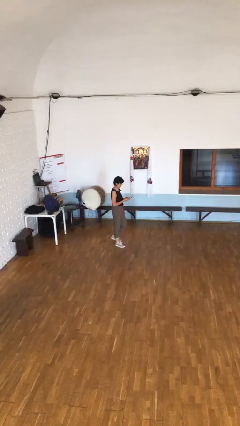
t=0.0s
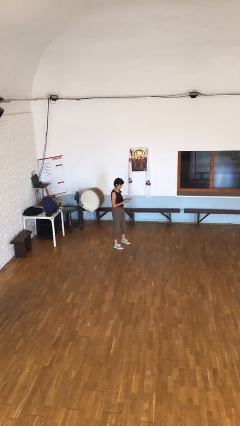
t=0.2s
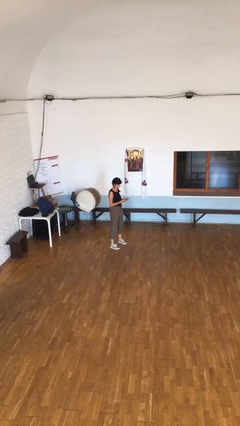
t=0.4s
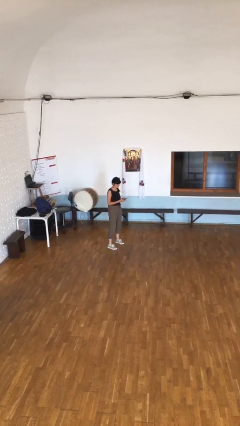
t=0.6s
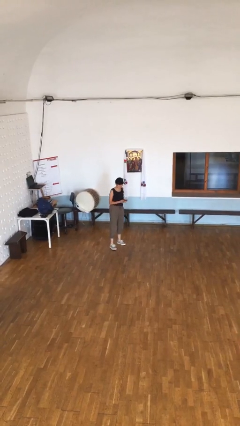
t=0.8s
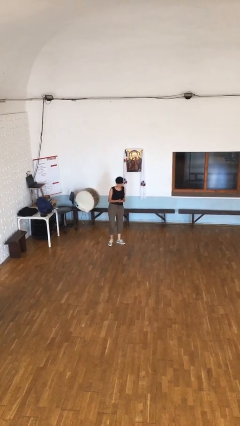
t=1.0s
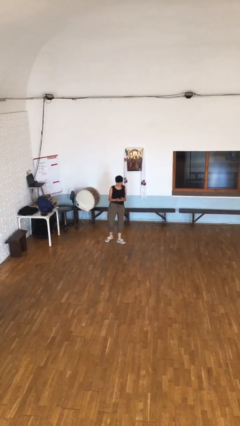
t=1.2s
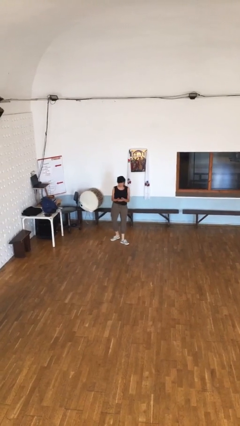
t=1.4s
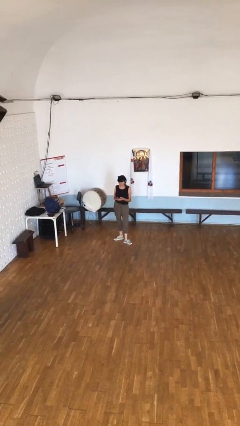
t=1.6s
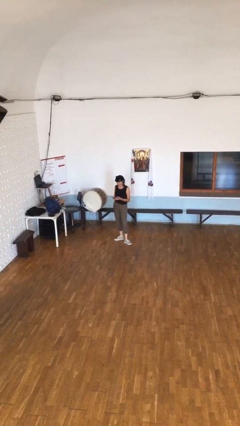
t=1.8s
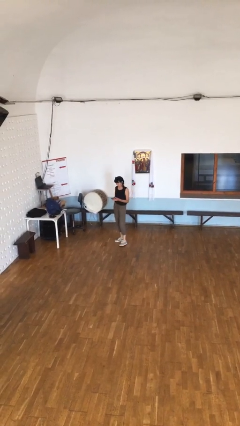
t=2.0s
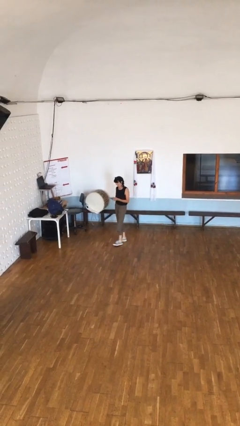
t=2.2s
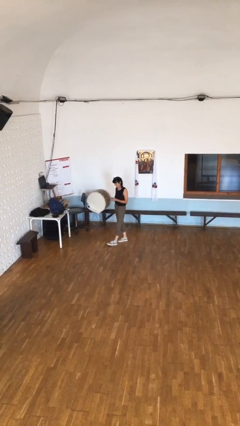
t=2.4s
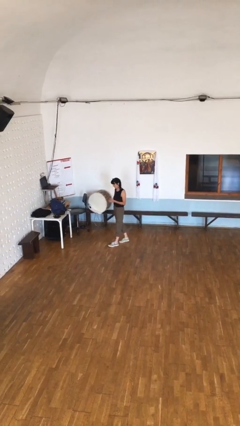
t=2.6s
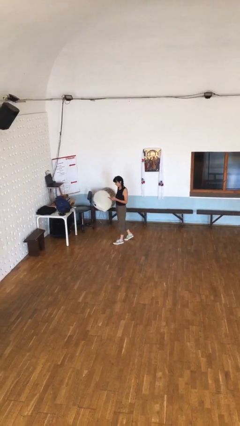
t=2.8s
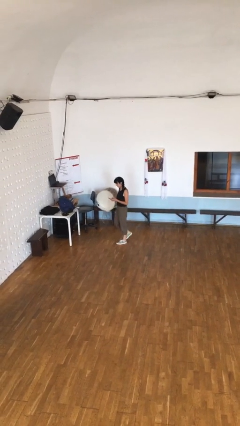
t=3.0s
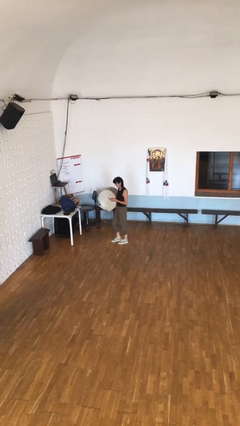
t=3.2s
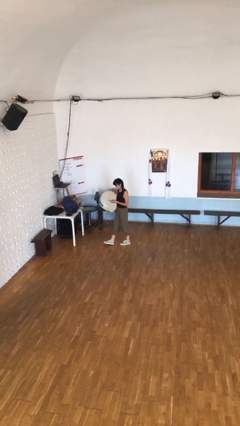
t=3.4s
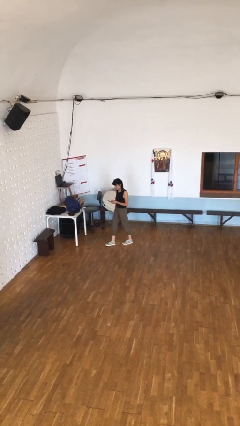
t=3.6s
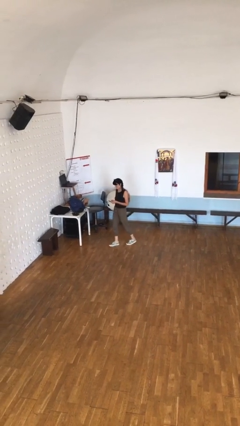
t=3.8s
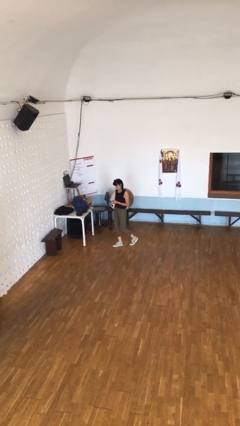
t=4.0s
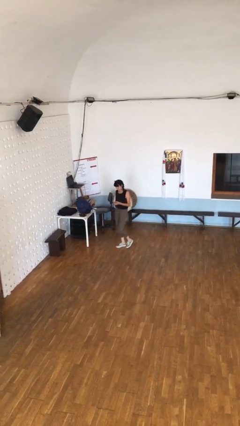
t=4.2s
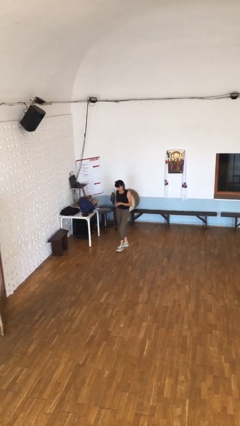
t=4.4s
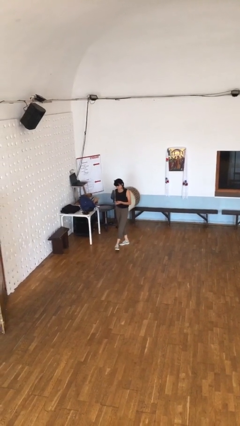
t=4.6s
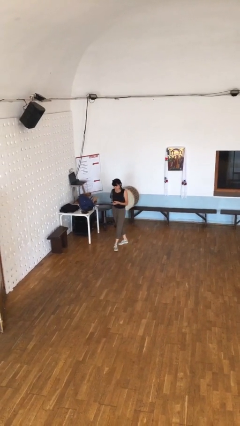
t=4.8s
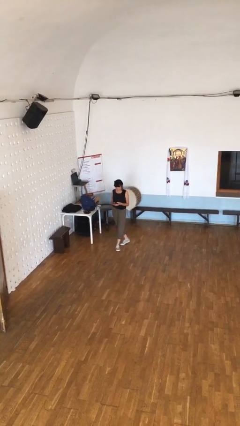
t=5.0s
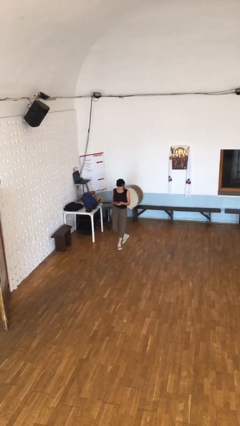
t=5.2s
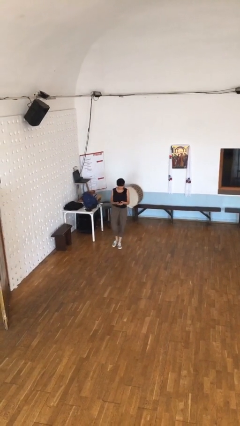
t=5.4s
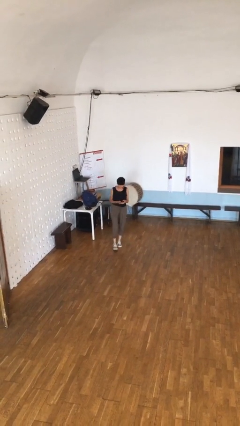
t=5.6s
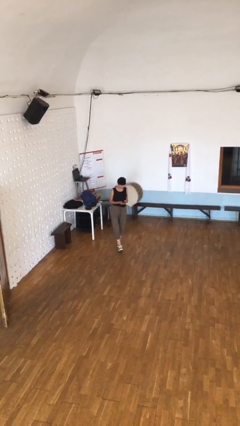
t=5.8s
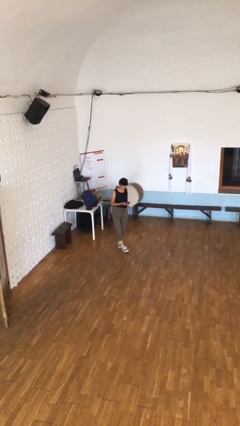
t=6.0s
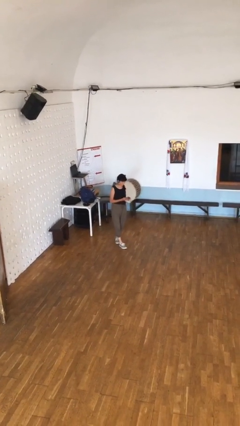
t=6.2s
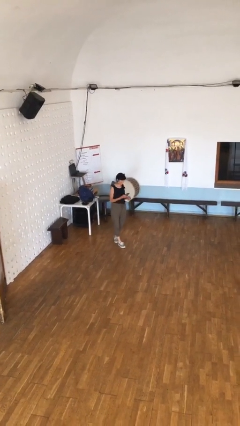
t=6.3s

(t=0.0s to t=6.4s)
person texts on phone

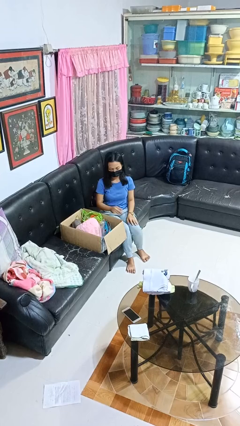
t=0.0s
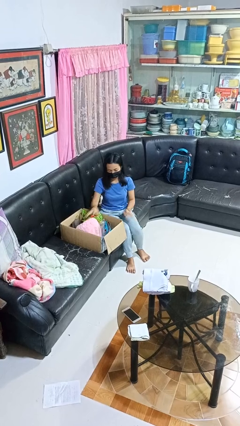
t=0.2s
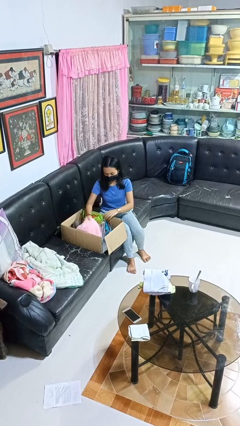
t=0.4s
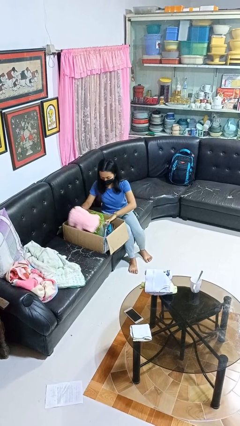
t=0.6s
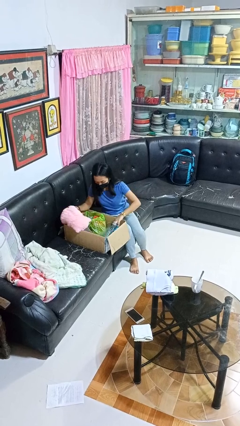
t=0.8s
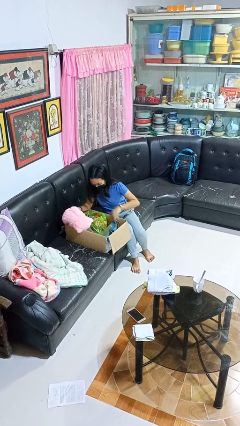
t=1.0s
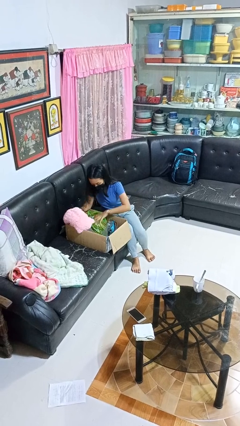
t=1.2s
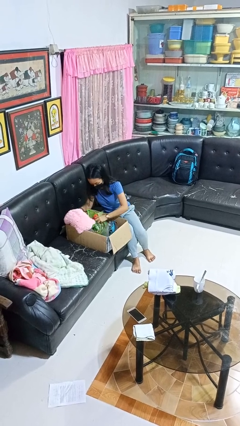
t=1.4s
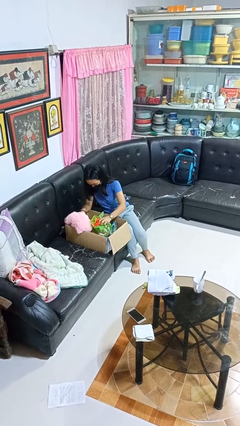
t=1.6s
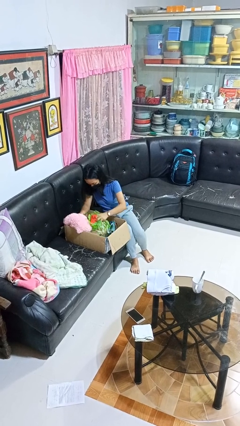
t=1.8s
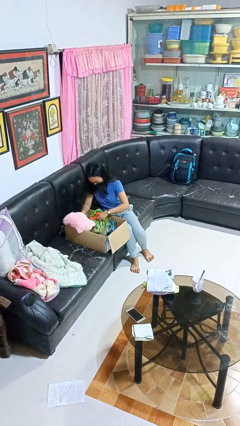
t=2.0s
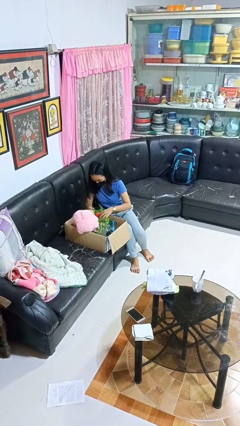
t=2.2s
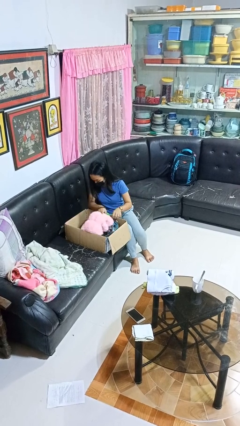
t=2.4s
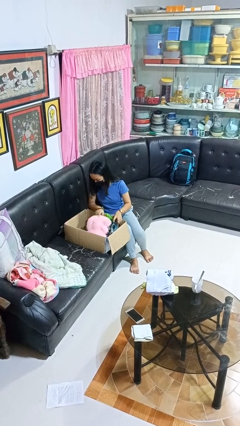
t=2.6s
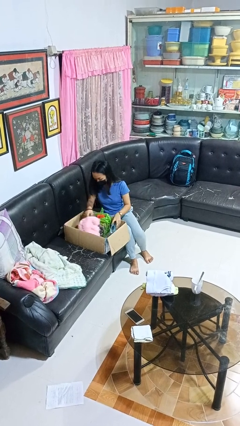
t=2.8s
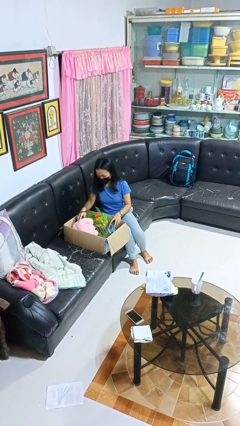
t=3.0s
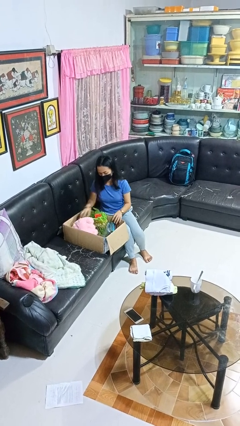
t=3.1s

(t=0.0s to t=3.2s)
person searches in box

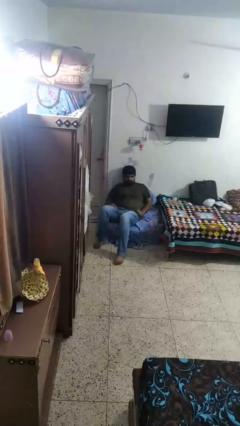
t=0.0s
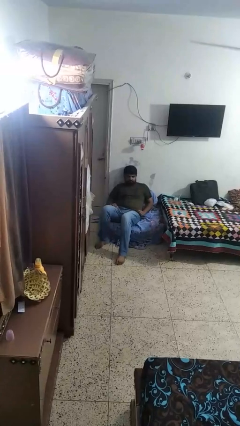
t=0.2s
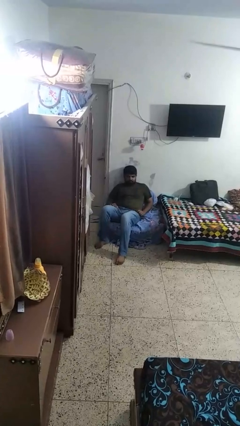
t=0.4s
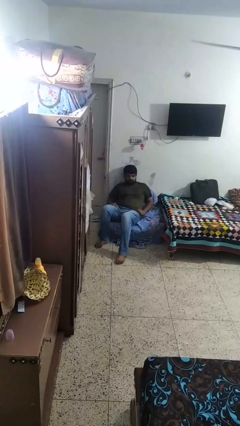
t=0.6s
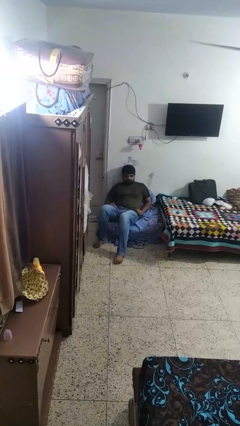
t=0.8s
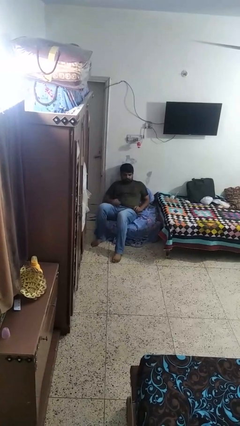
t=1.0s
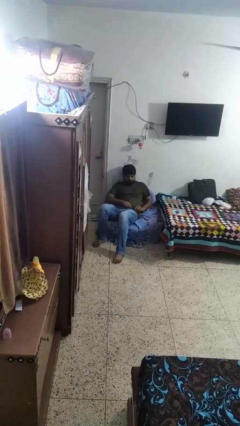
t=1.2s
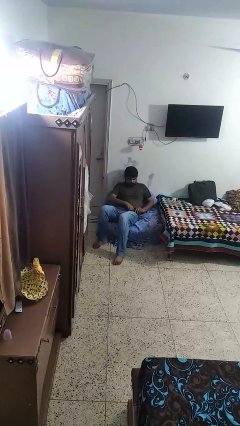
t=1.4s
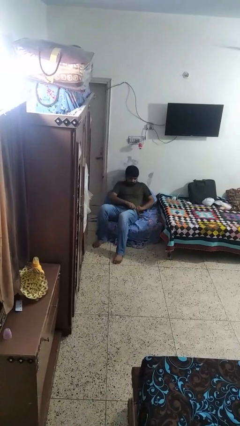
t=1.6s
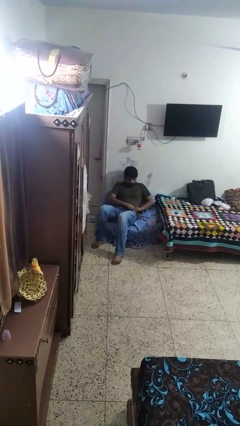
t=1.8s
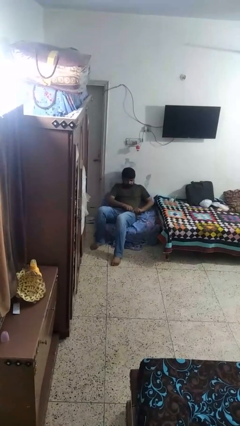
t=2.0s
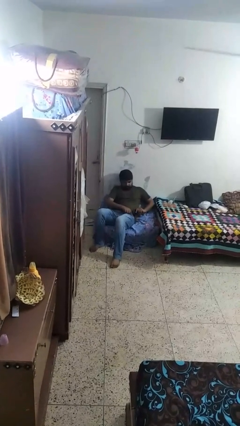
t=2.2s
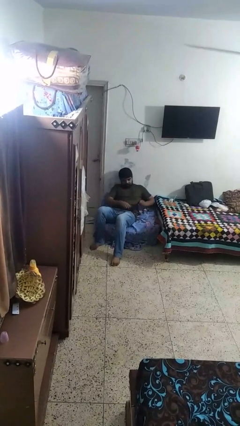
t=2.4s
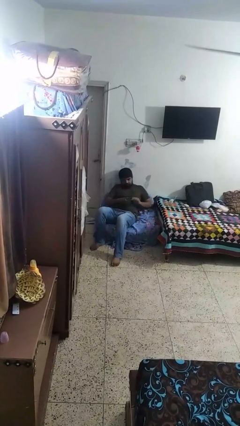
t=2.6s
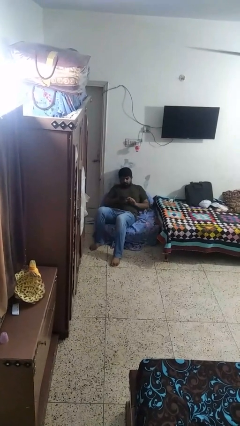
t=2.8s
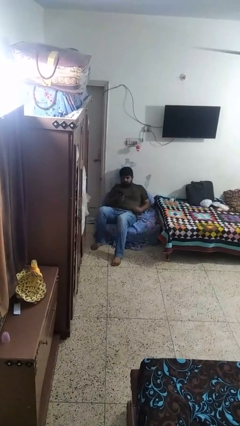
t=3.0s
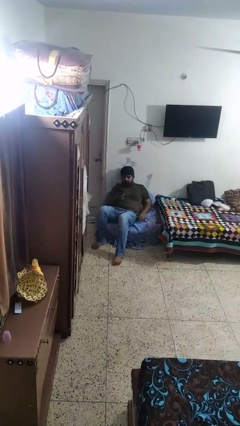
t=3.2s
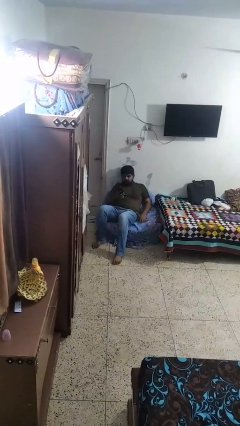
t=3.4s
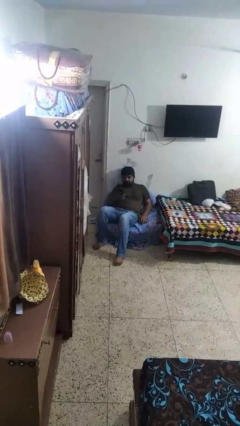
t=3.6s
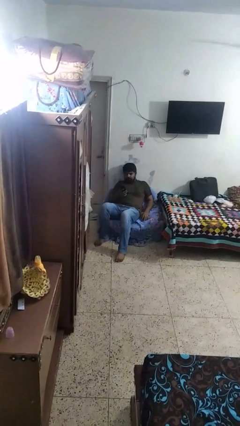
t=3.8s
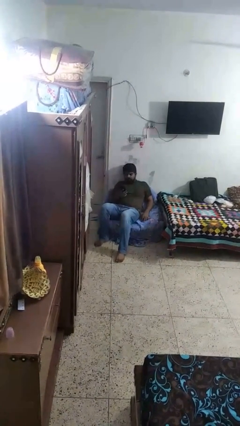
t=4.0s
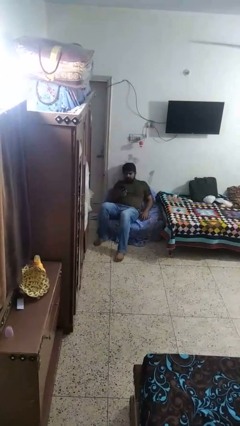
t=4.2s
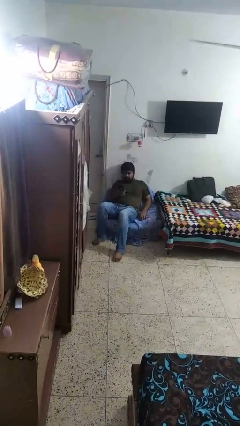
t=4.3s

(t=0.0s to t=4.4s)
person takes phone from pocket

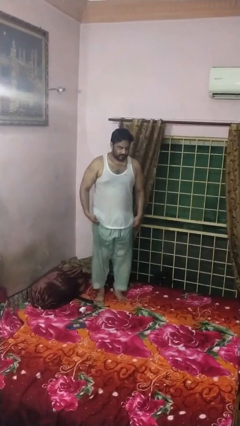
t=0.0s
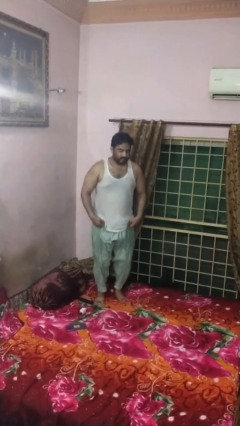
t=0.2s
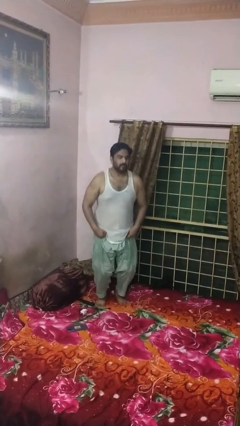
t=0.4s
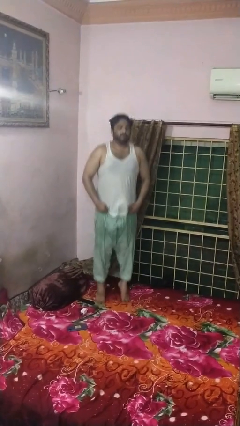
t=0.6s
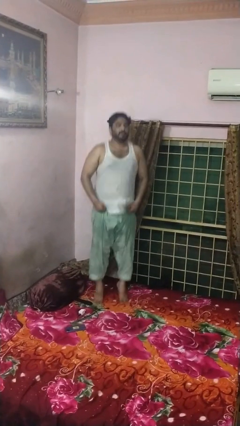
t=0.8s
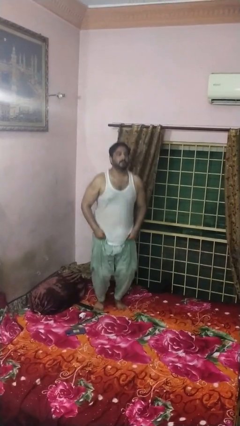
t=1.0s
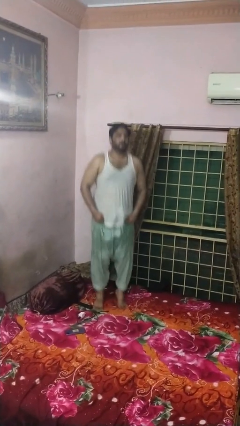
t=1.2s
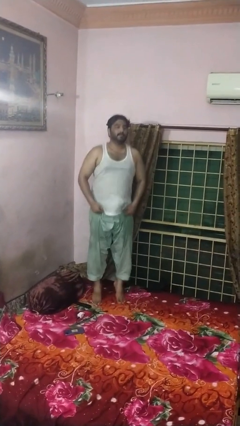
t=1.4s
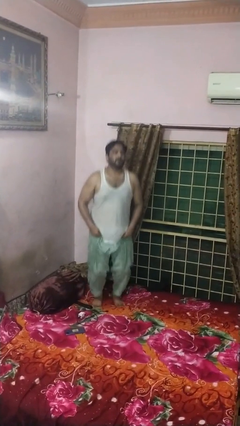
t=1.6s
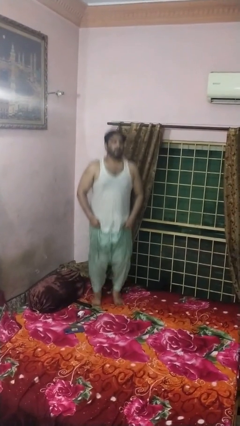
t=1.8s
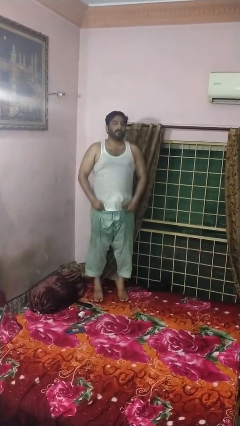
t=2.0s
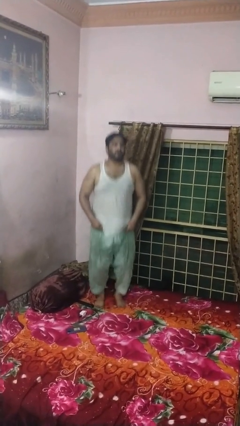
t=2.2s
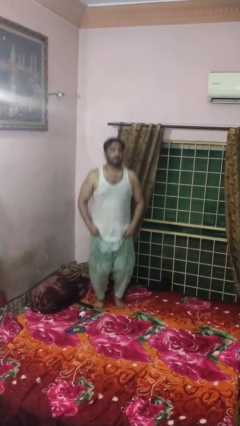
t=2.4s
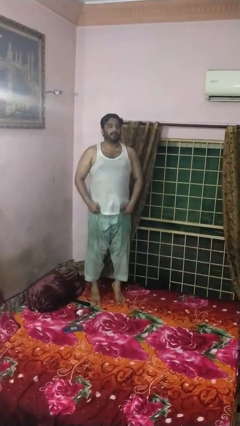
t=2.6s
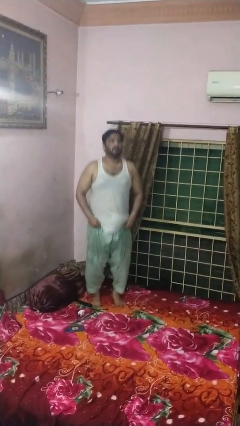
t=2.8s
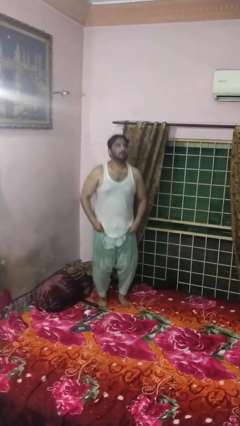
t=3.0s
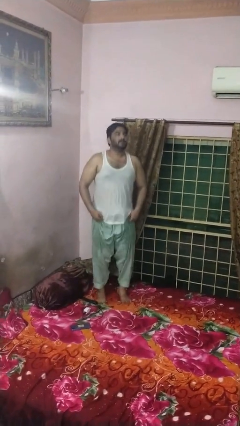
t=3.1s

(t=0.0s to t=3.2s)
person jumps on bed

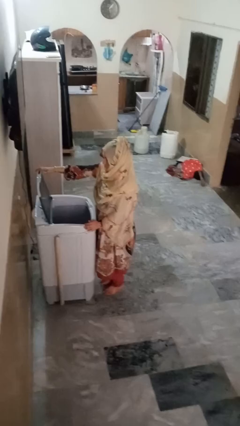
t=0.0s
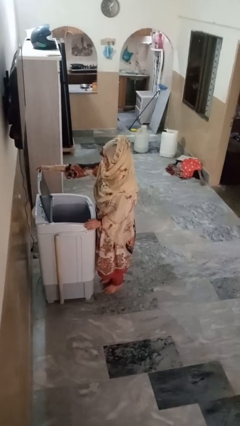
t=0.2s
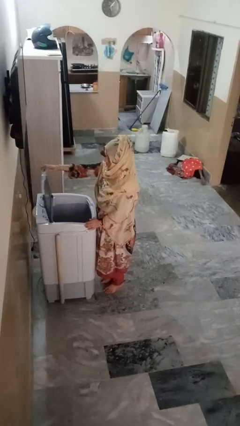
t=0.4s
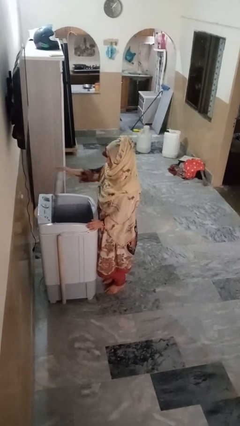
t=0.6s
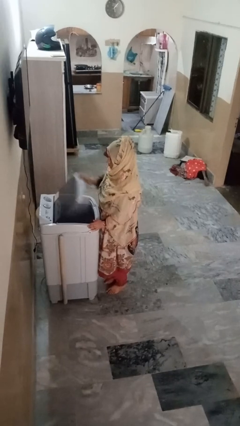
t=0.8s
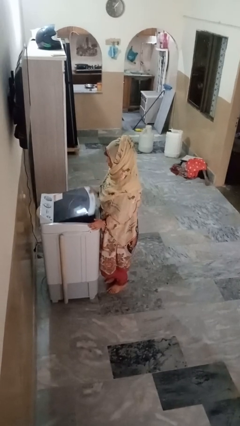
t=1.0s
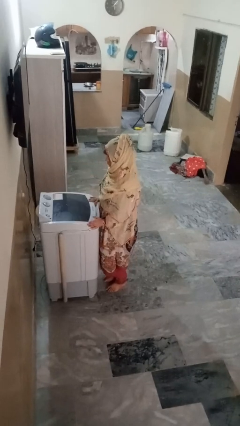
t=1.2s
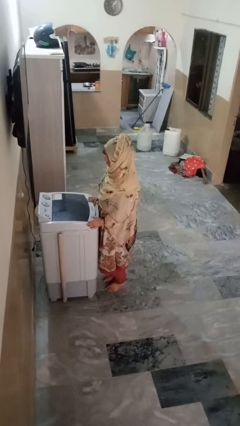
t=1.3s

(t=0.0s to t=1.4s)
person closes clothes washer
